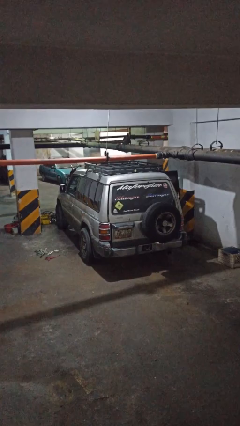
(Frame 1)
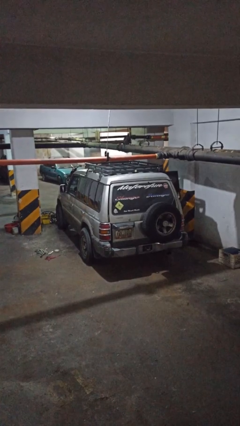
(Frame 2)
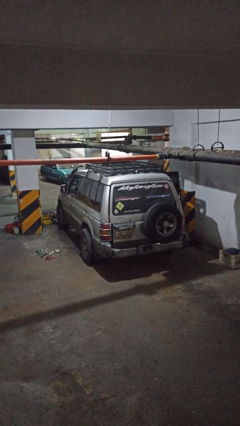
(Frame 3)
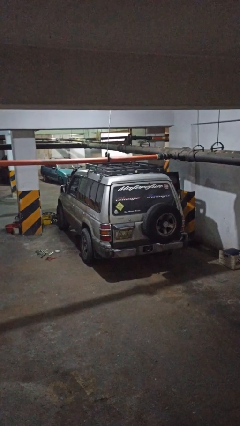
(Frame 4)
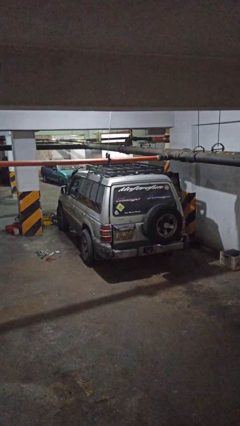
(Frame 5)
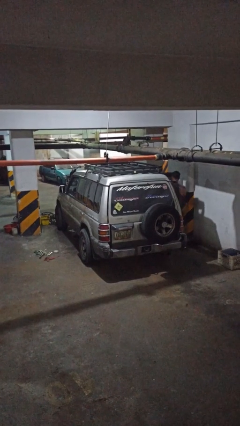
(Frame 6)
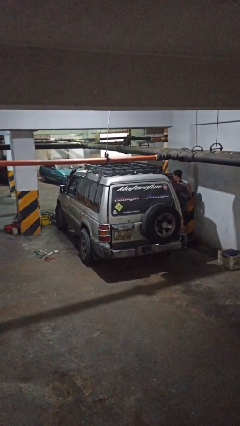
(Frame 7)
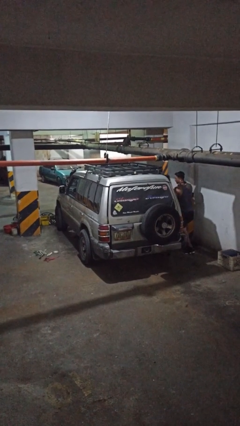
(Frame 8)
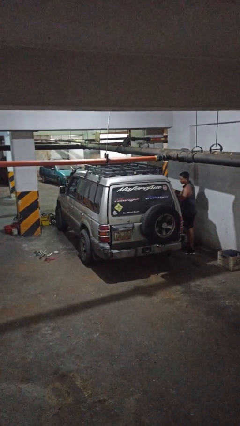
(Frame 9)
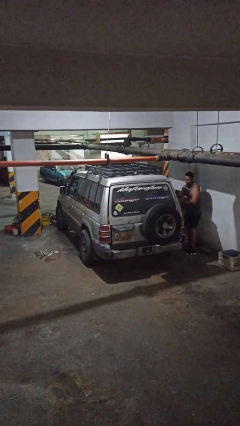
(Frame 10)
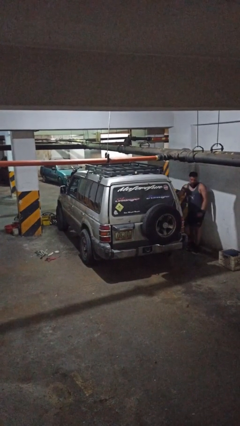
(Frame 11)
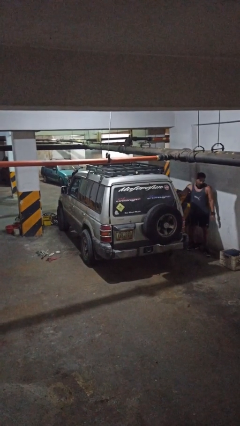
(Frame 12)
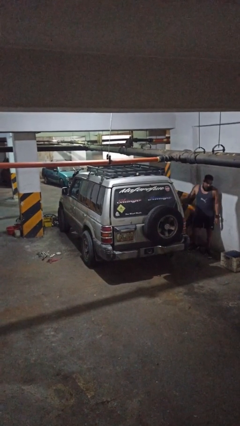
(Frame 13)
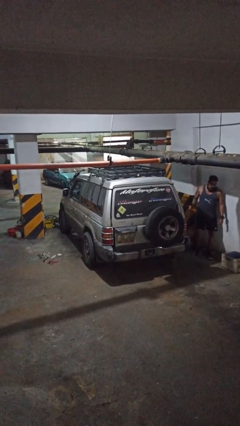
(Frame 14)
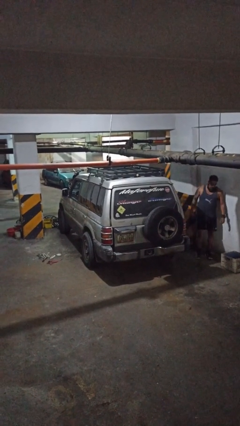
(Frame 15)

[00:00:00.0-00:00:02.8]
car drops off person

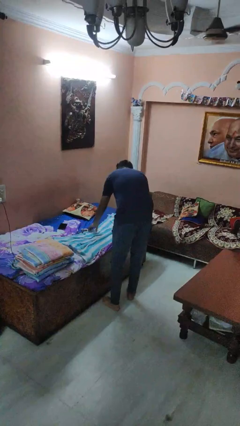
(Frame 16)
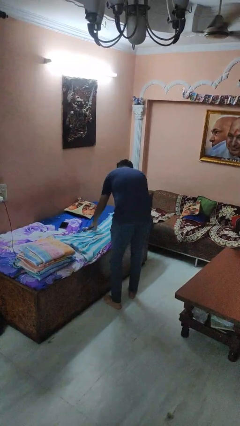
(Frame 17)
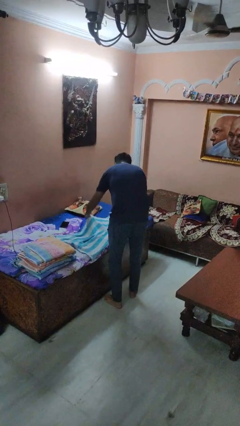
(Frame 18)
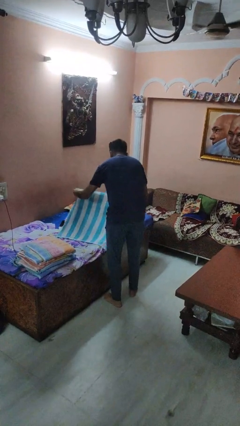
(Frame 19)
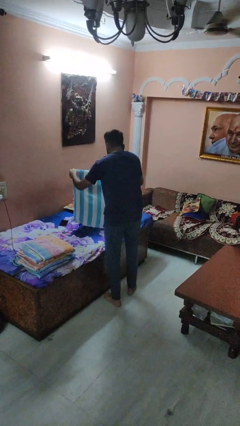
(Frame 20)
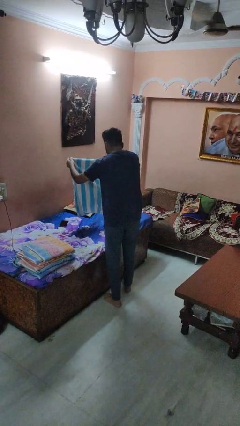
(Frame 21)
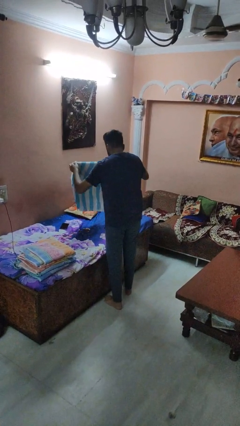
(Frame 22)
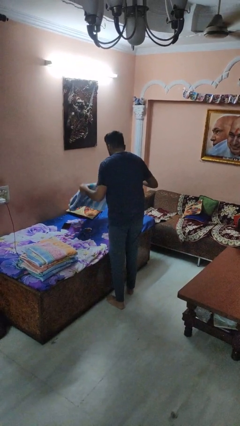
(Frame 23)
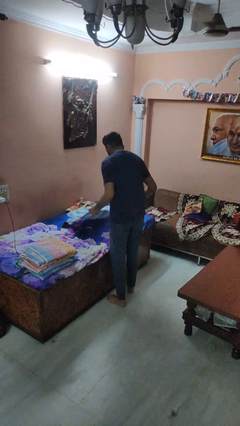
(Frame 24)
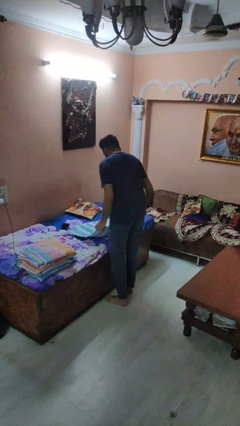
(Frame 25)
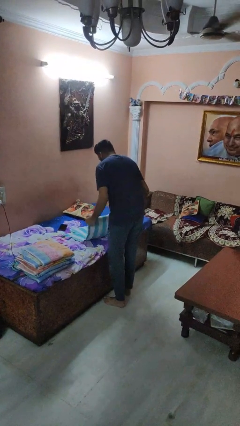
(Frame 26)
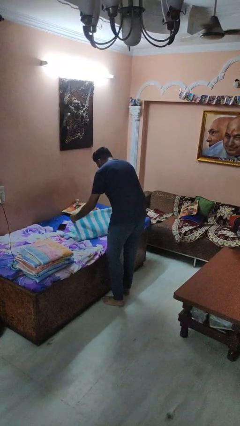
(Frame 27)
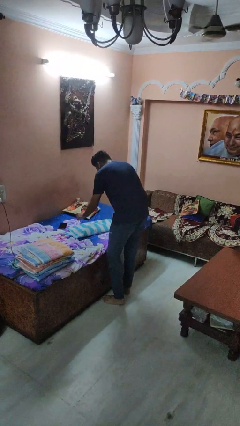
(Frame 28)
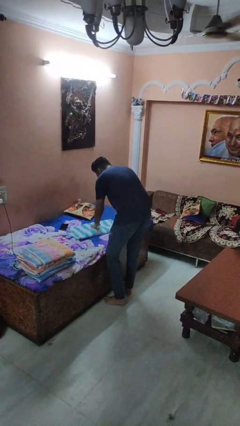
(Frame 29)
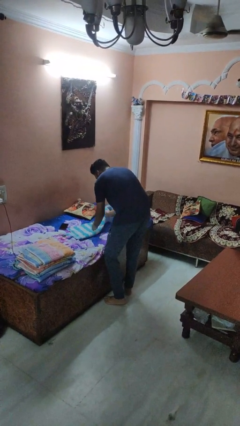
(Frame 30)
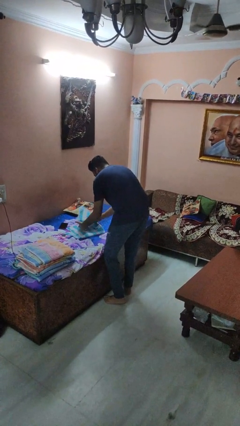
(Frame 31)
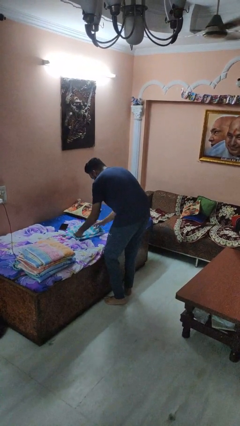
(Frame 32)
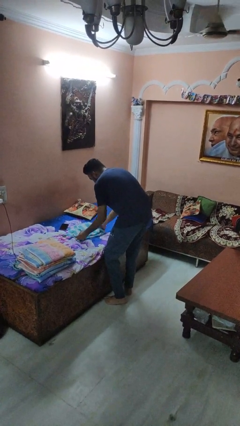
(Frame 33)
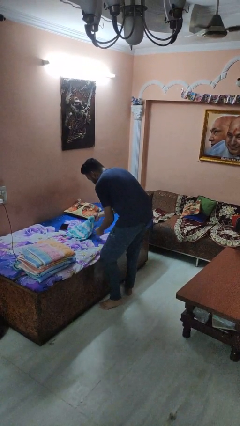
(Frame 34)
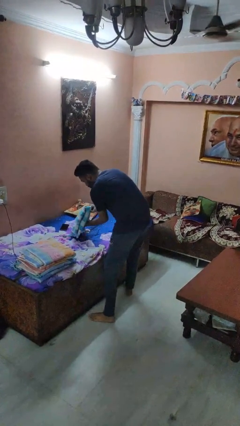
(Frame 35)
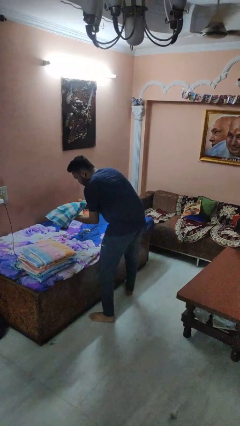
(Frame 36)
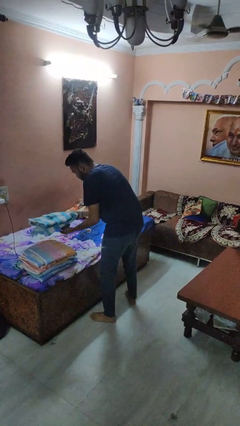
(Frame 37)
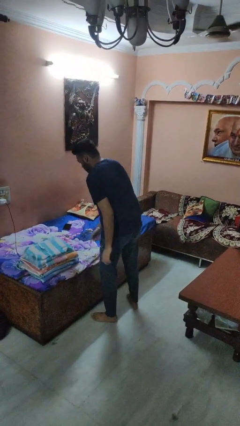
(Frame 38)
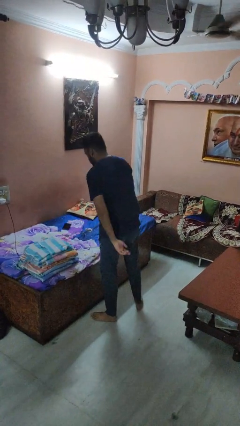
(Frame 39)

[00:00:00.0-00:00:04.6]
person folds towel

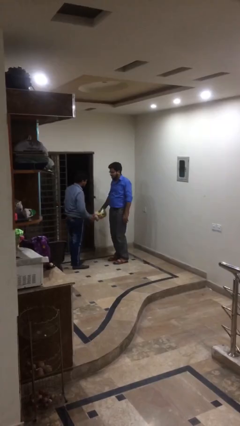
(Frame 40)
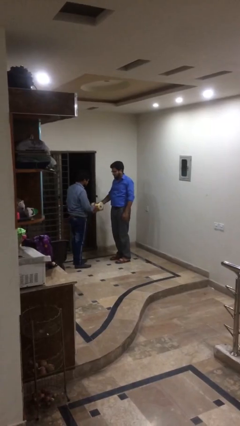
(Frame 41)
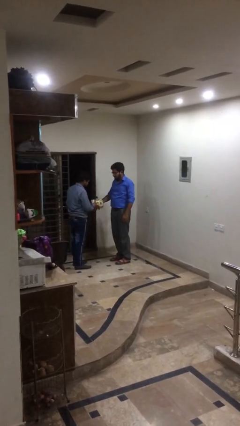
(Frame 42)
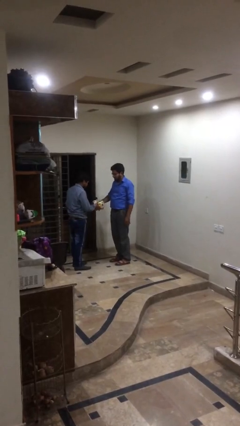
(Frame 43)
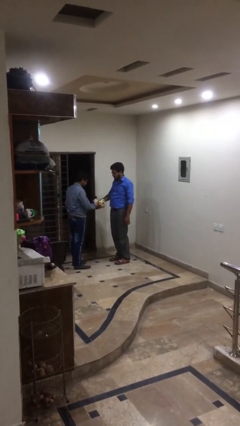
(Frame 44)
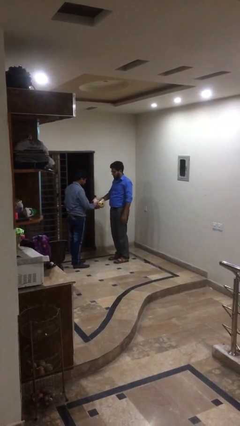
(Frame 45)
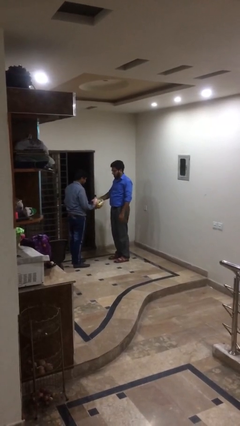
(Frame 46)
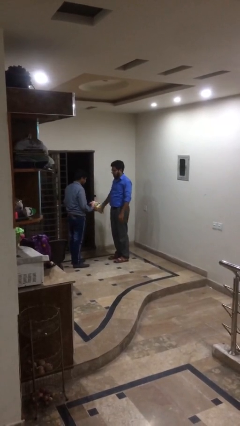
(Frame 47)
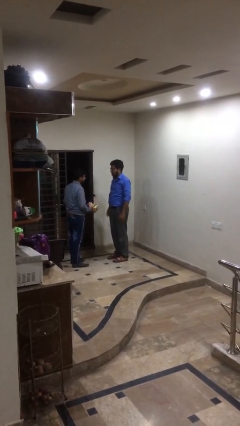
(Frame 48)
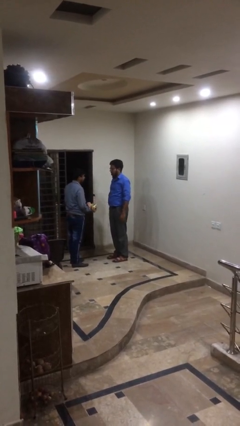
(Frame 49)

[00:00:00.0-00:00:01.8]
person transfers object to person

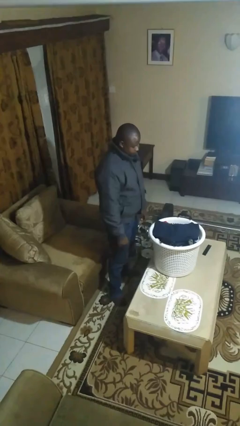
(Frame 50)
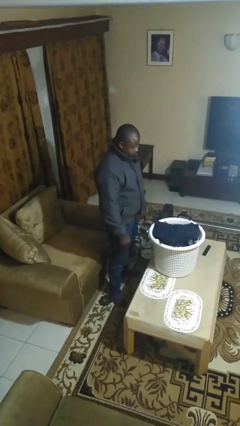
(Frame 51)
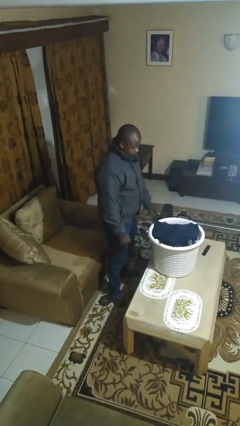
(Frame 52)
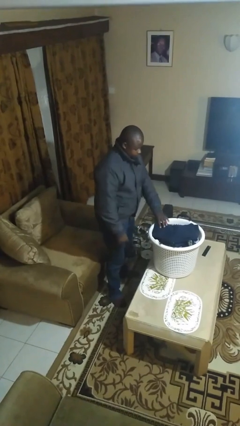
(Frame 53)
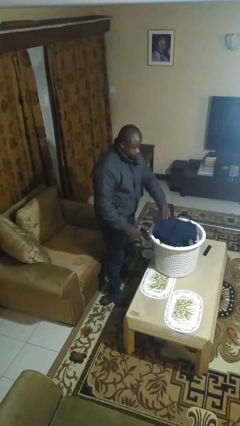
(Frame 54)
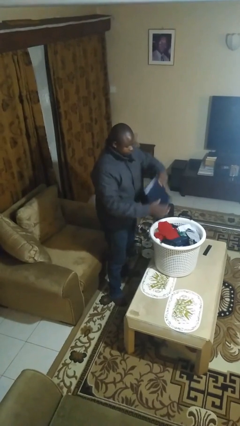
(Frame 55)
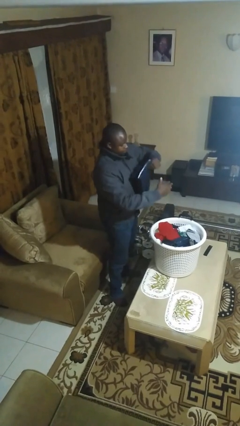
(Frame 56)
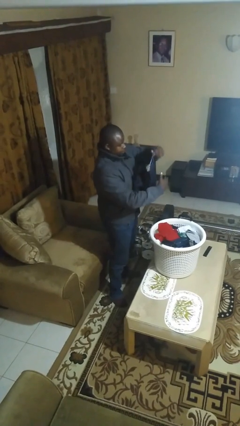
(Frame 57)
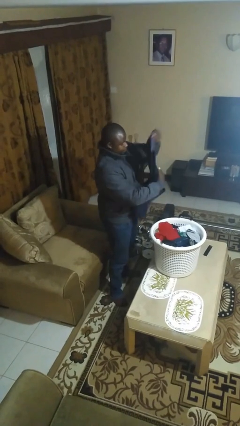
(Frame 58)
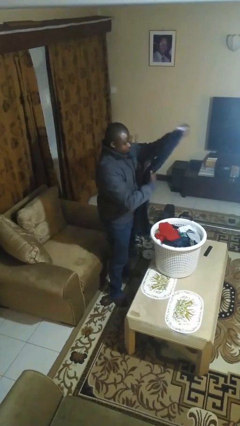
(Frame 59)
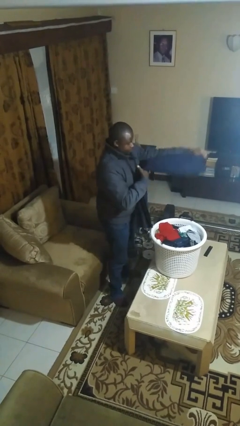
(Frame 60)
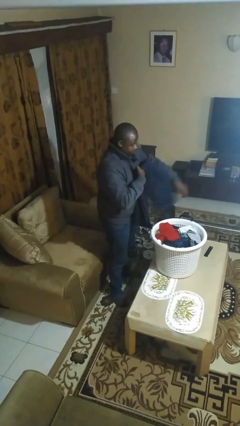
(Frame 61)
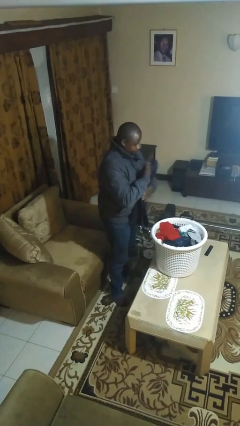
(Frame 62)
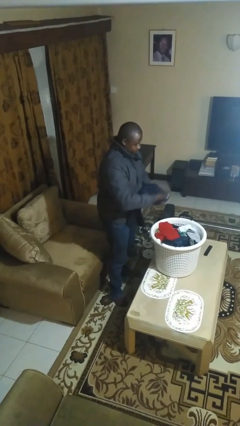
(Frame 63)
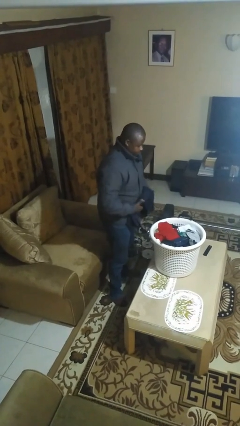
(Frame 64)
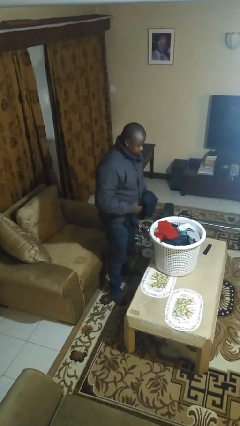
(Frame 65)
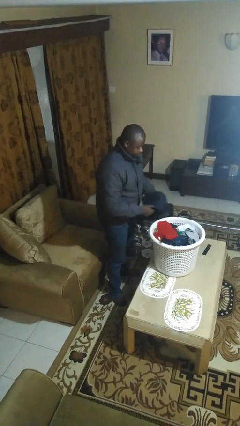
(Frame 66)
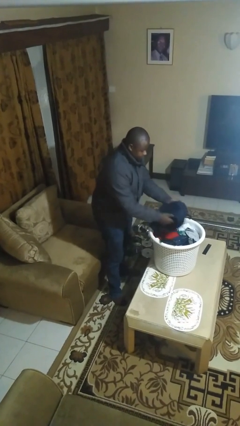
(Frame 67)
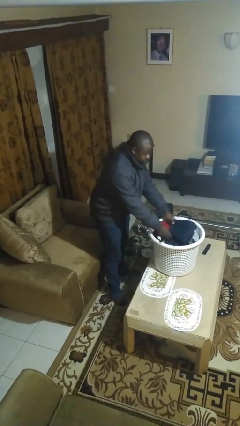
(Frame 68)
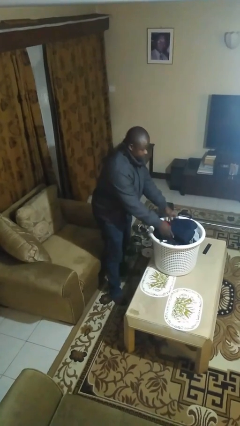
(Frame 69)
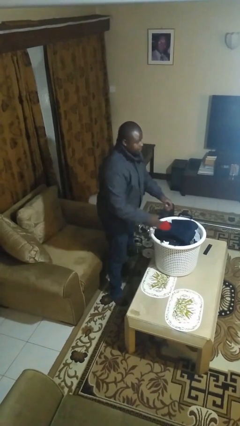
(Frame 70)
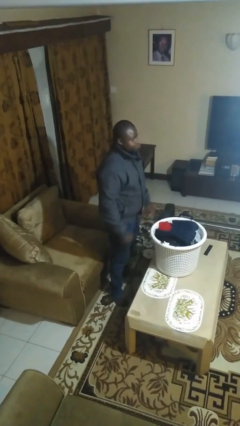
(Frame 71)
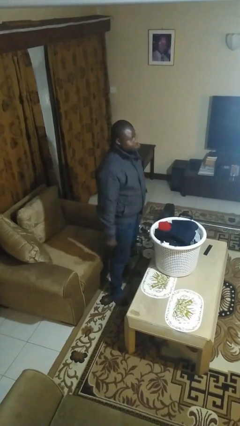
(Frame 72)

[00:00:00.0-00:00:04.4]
person folds pants

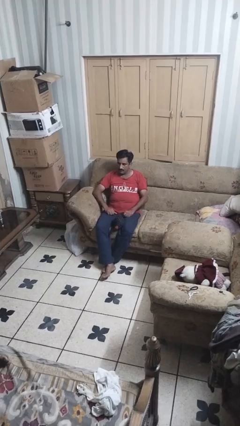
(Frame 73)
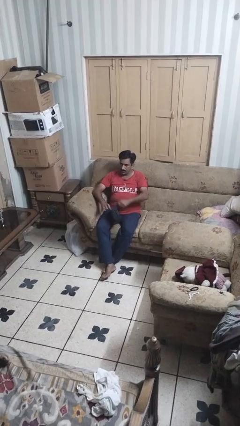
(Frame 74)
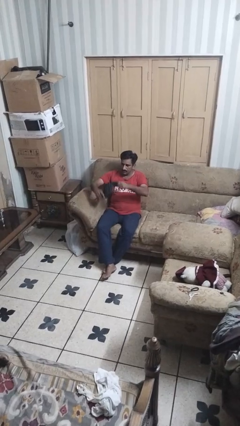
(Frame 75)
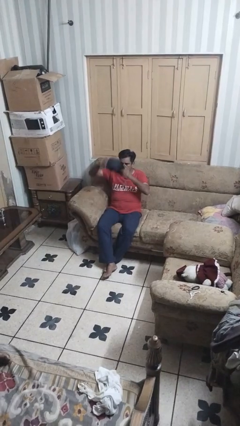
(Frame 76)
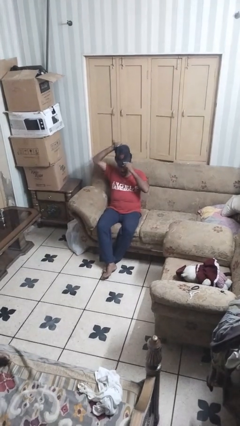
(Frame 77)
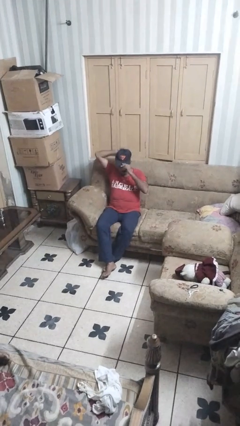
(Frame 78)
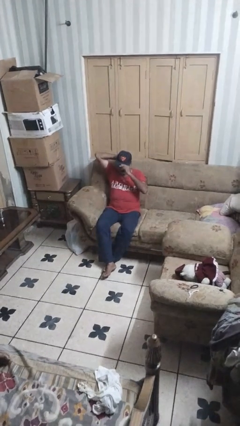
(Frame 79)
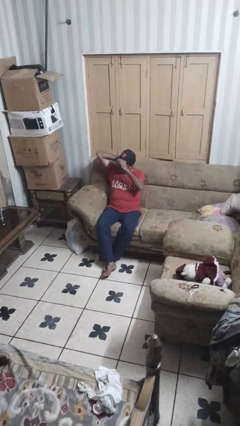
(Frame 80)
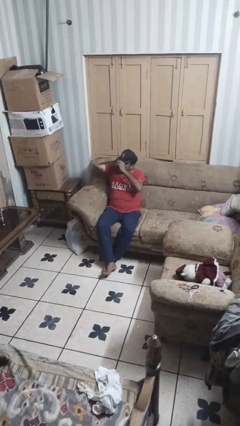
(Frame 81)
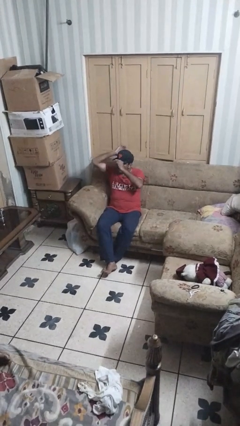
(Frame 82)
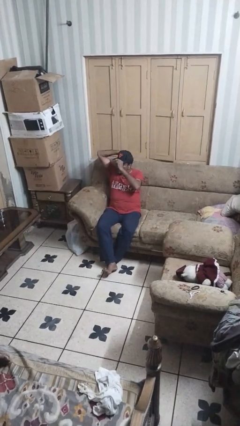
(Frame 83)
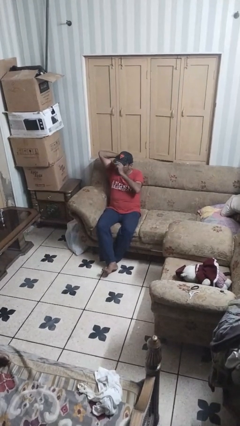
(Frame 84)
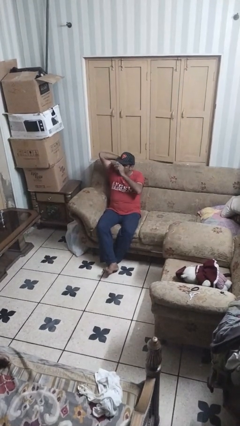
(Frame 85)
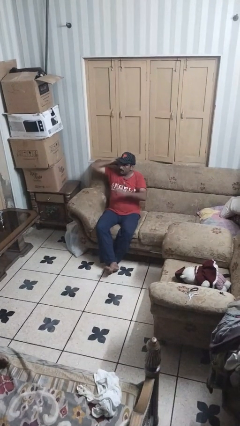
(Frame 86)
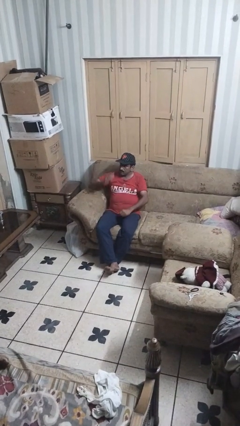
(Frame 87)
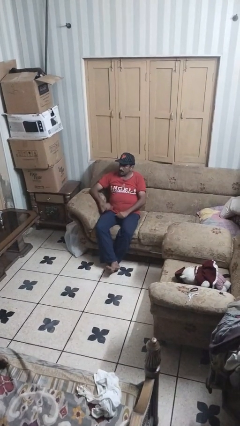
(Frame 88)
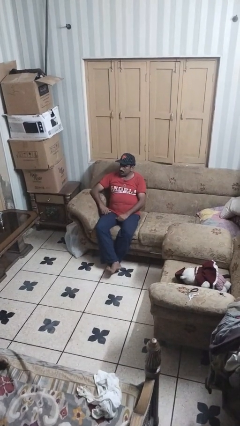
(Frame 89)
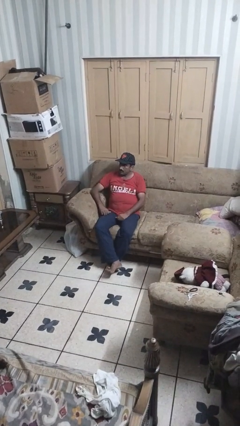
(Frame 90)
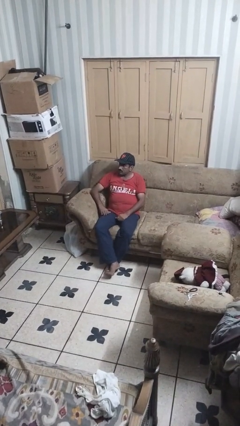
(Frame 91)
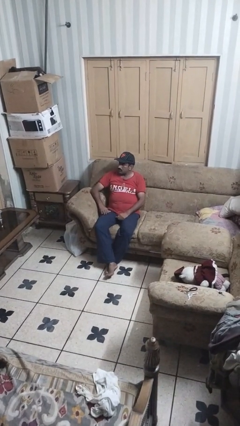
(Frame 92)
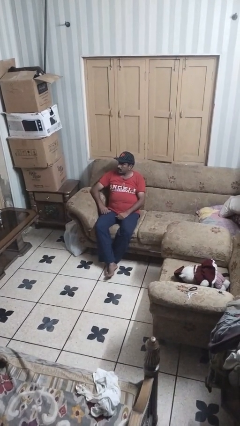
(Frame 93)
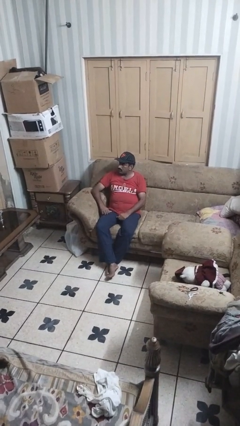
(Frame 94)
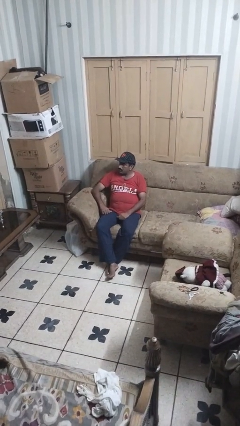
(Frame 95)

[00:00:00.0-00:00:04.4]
person puts on hat
